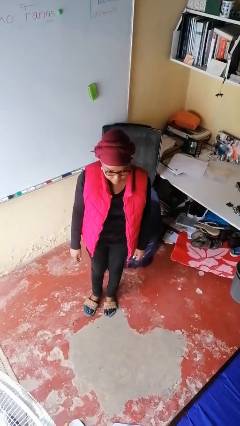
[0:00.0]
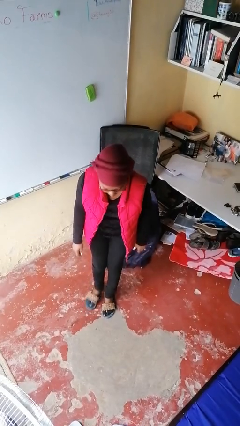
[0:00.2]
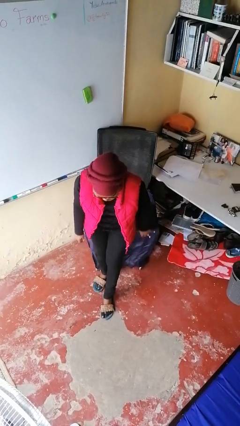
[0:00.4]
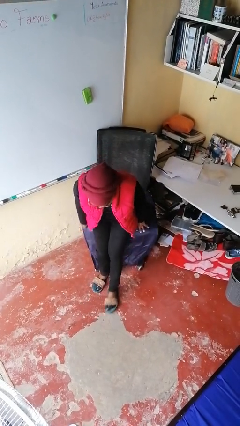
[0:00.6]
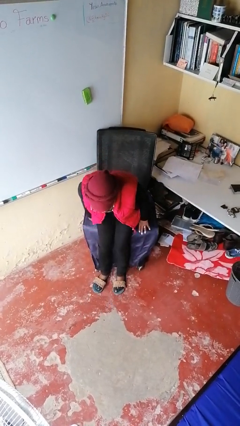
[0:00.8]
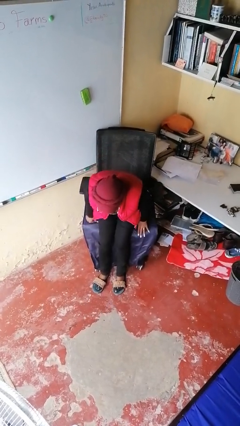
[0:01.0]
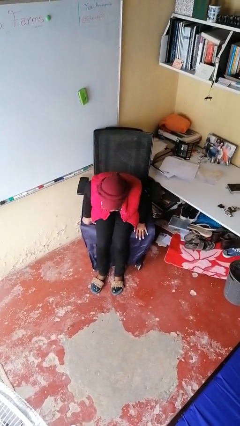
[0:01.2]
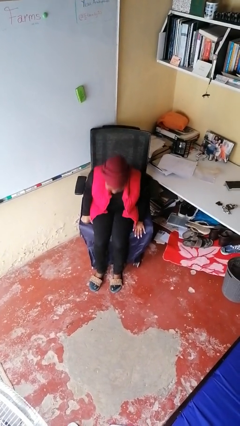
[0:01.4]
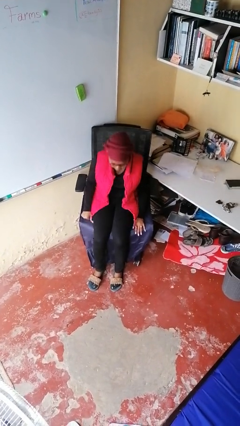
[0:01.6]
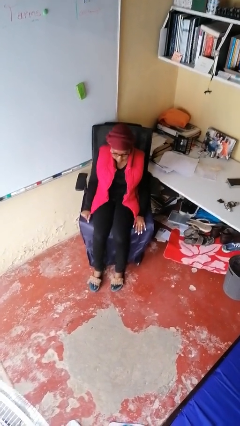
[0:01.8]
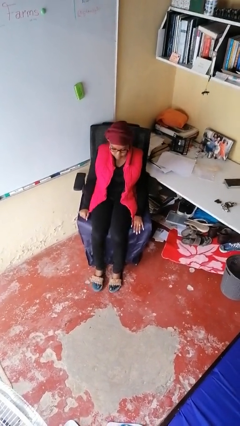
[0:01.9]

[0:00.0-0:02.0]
person sits down

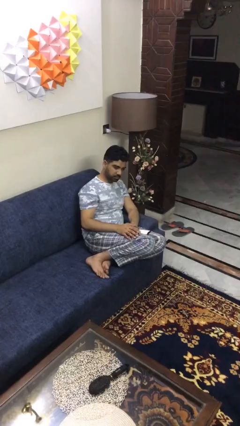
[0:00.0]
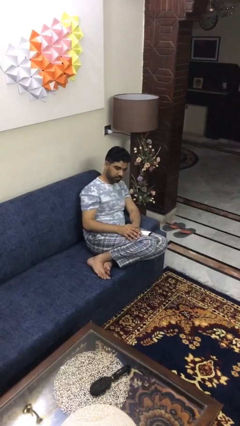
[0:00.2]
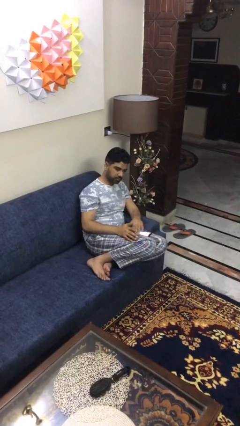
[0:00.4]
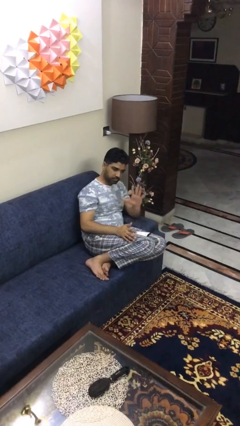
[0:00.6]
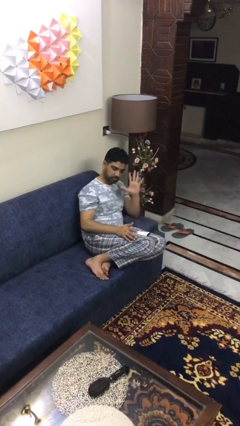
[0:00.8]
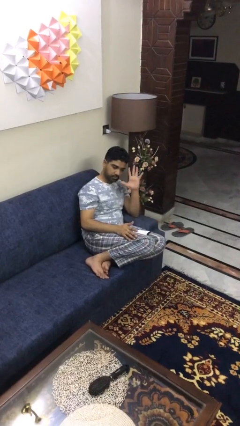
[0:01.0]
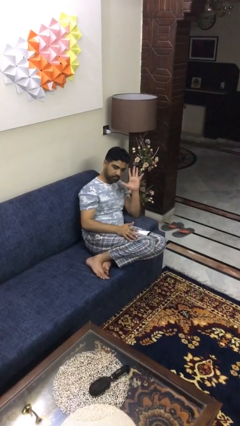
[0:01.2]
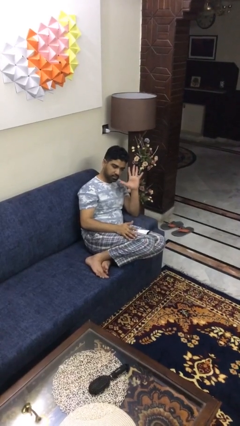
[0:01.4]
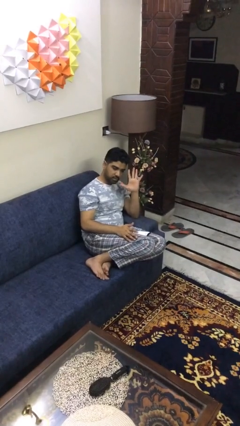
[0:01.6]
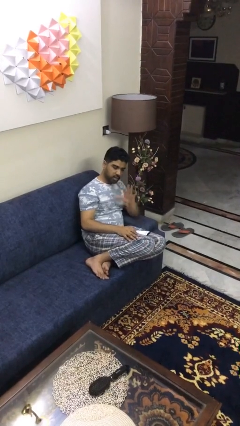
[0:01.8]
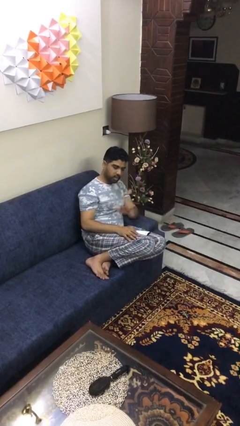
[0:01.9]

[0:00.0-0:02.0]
person gestures number five

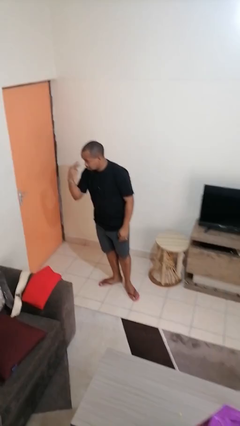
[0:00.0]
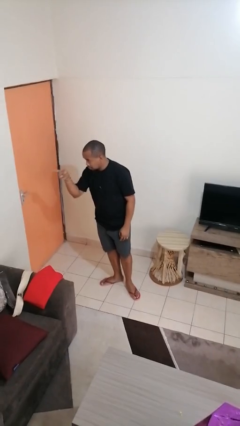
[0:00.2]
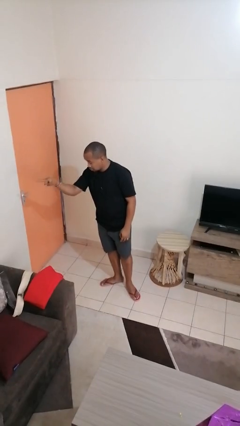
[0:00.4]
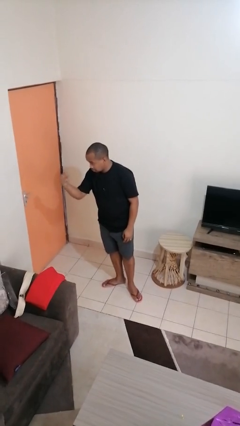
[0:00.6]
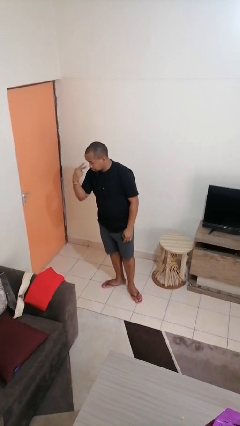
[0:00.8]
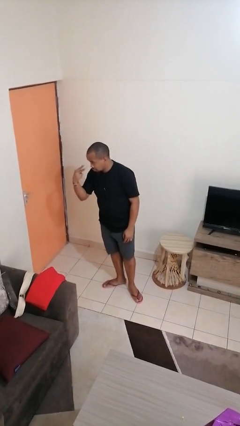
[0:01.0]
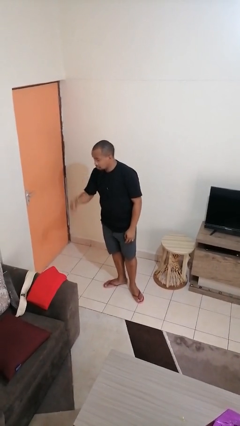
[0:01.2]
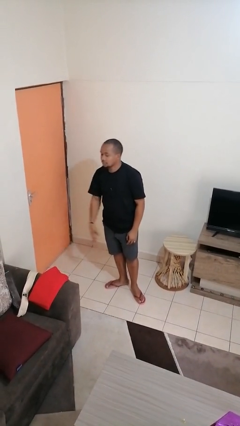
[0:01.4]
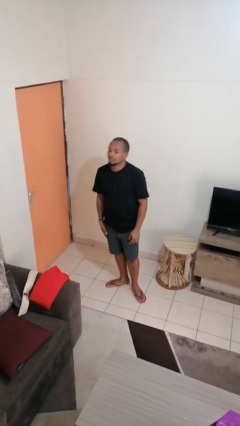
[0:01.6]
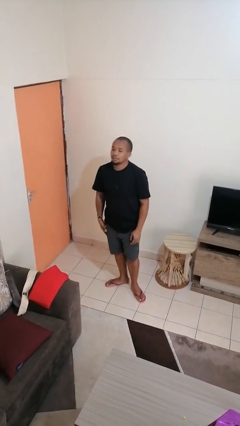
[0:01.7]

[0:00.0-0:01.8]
person gestures watch closely

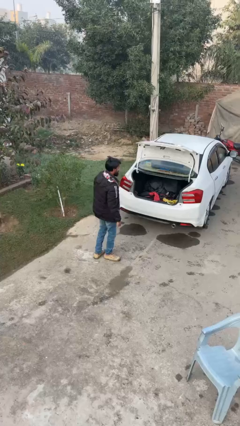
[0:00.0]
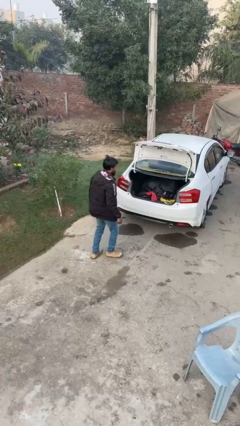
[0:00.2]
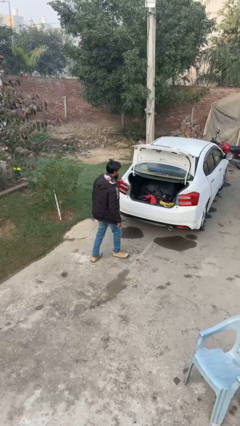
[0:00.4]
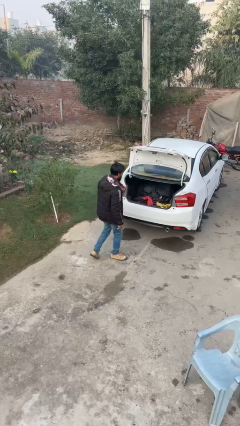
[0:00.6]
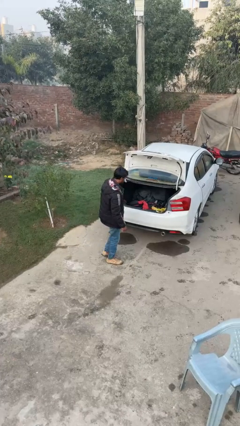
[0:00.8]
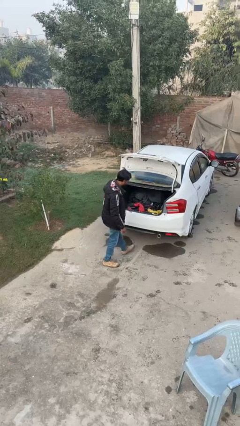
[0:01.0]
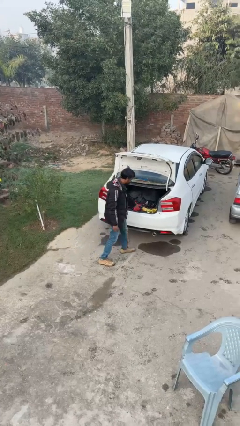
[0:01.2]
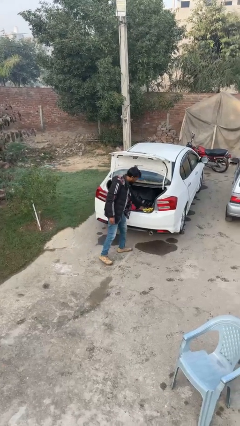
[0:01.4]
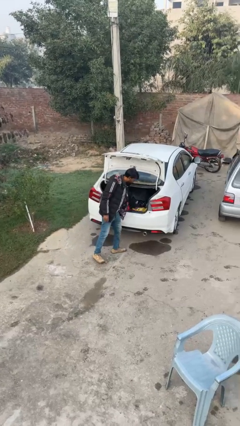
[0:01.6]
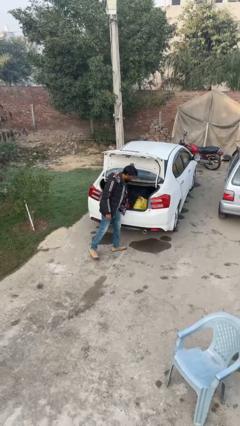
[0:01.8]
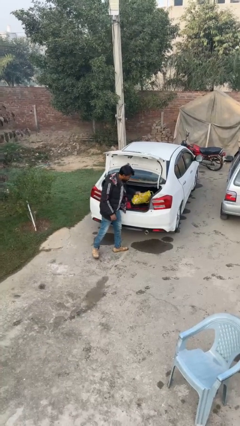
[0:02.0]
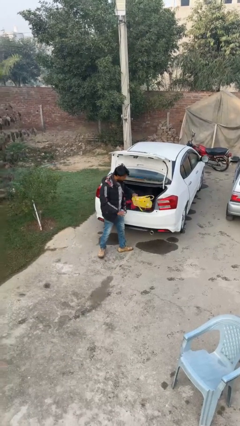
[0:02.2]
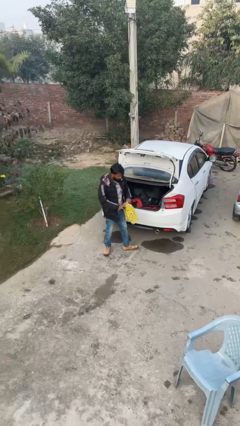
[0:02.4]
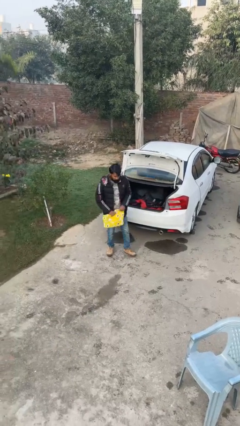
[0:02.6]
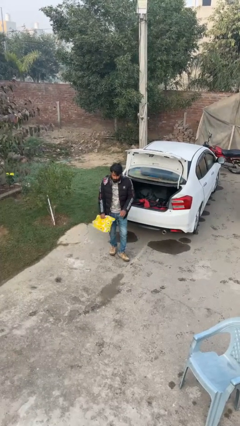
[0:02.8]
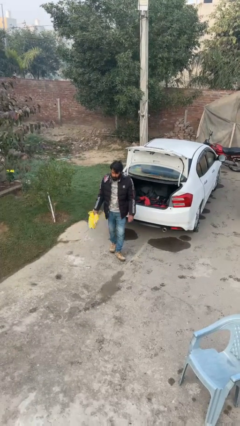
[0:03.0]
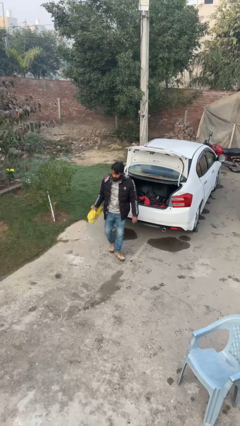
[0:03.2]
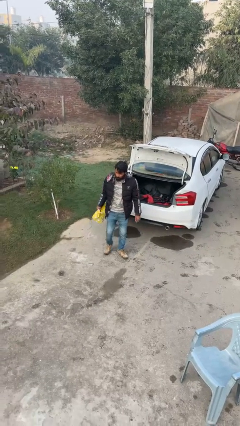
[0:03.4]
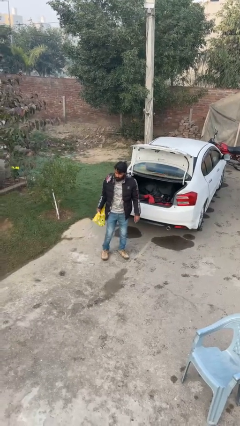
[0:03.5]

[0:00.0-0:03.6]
person unloads car

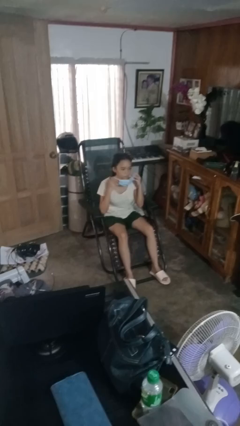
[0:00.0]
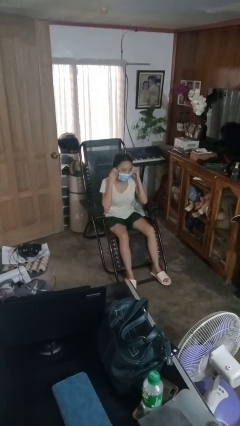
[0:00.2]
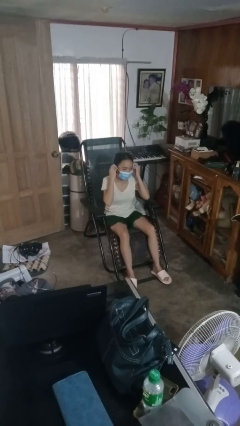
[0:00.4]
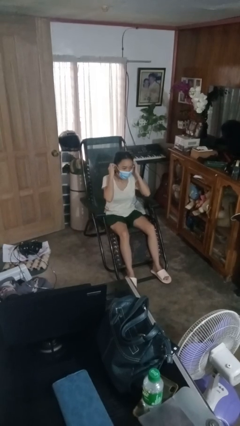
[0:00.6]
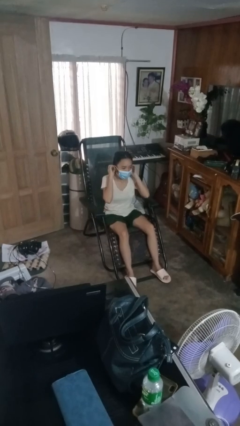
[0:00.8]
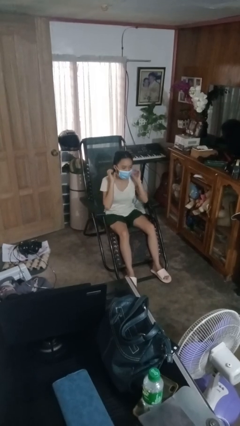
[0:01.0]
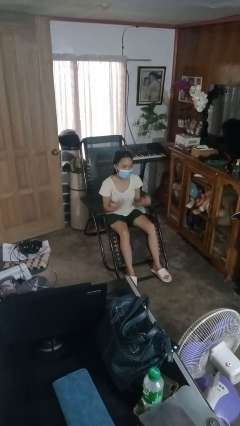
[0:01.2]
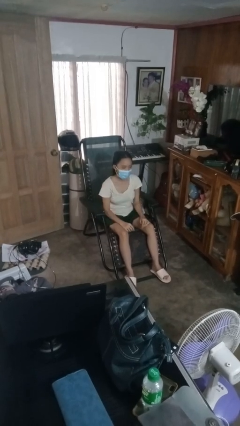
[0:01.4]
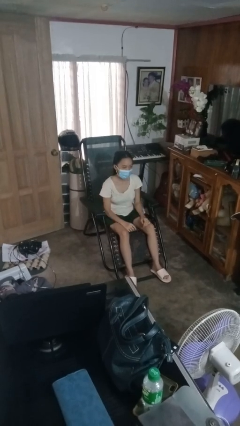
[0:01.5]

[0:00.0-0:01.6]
person puts on facemask

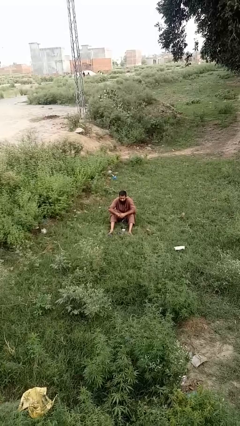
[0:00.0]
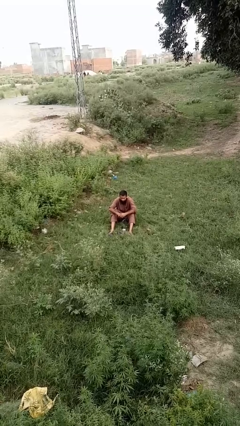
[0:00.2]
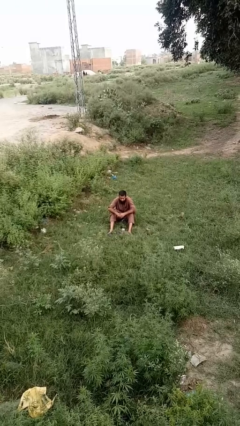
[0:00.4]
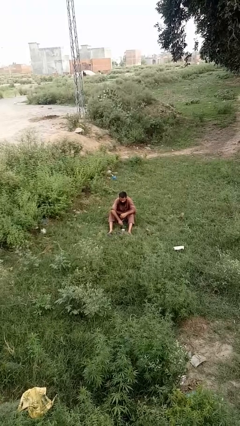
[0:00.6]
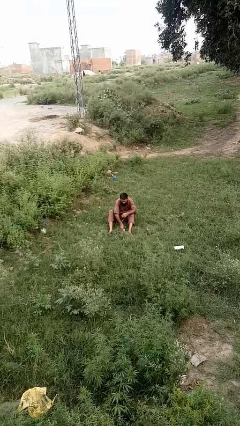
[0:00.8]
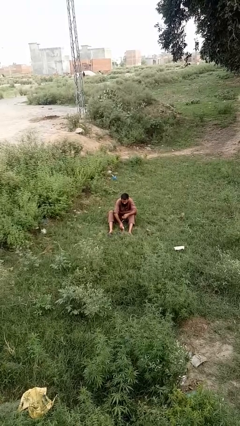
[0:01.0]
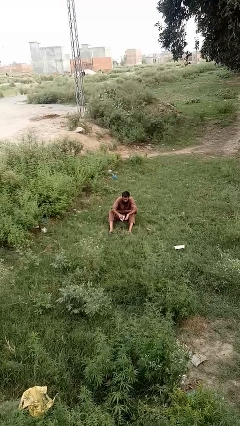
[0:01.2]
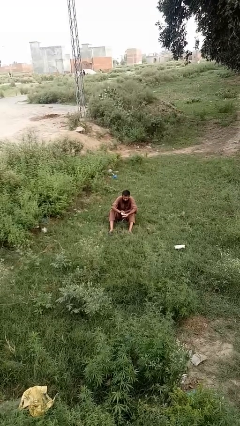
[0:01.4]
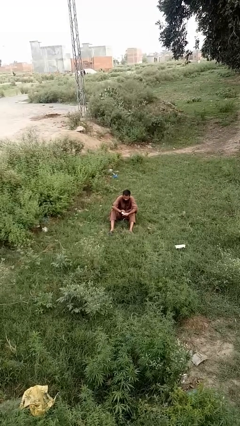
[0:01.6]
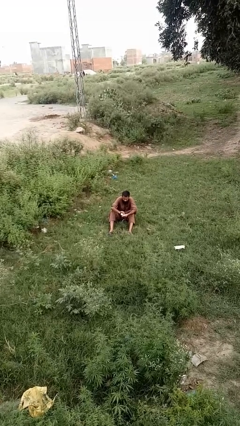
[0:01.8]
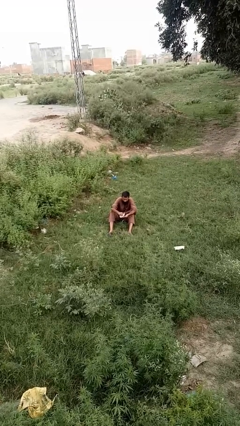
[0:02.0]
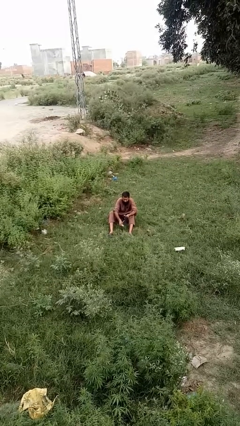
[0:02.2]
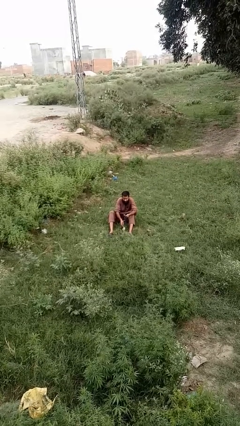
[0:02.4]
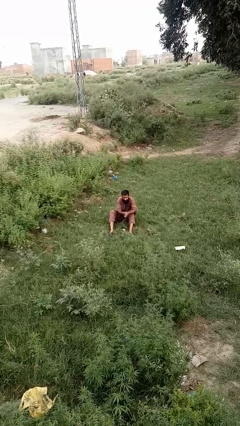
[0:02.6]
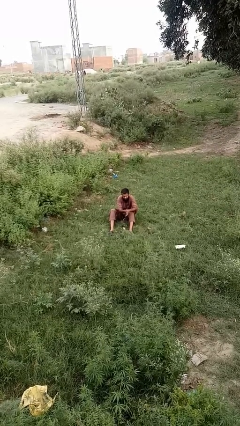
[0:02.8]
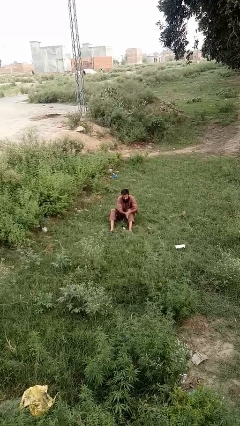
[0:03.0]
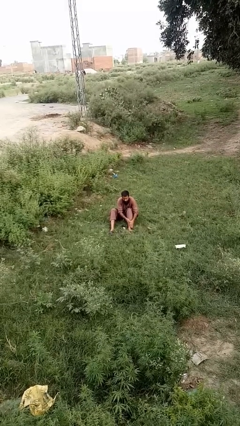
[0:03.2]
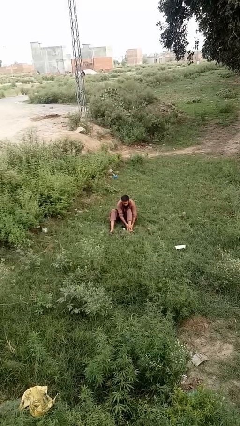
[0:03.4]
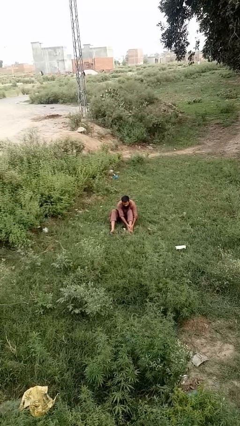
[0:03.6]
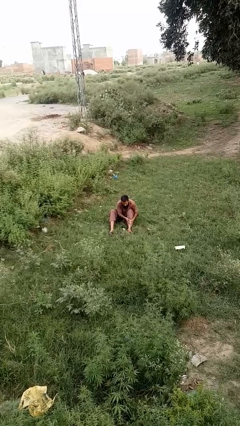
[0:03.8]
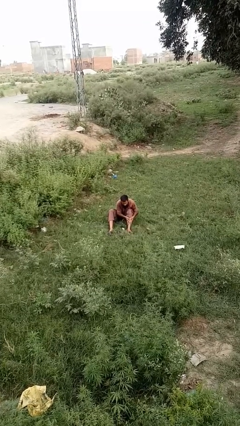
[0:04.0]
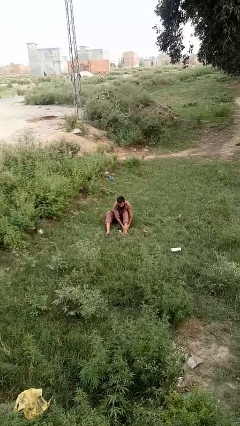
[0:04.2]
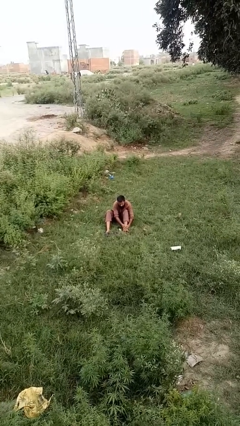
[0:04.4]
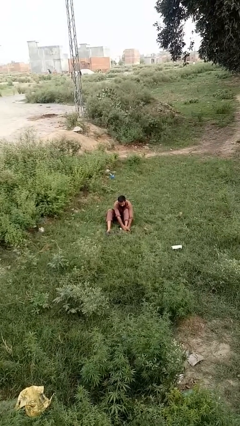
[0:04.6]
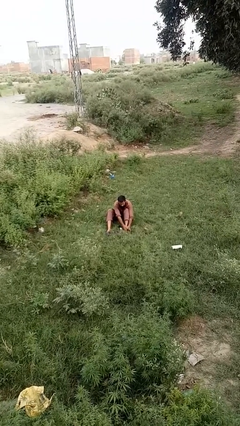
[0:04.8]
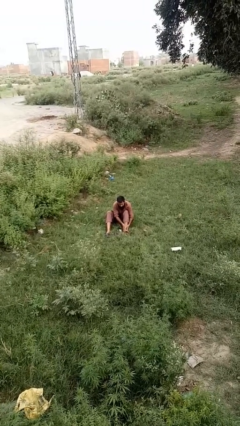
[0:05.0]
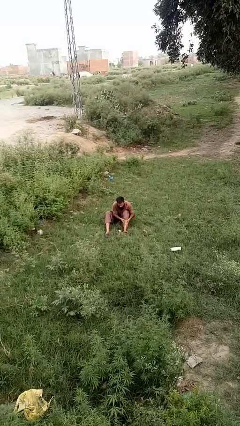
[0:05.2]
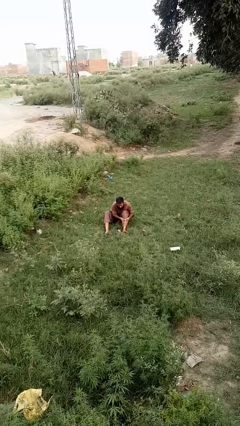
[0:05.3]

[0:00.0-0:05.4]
person applies sunscreen

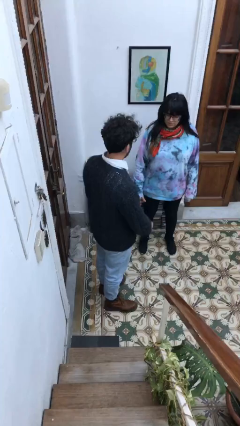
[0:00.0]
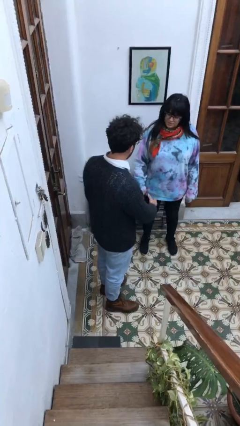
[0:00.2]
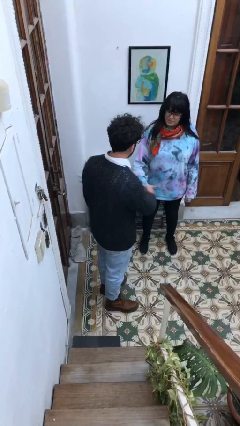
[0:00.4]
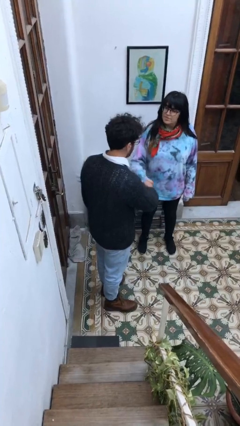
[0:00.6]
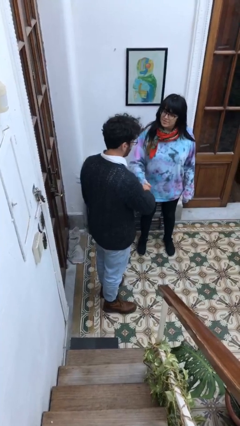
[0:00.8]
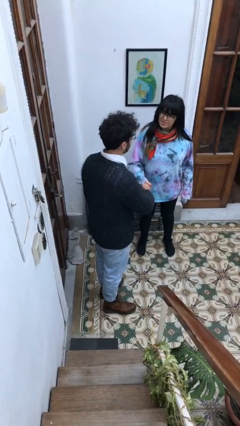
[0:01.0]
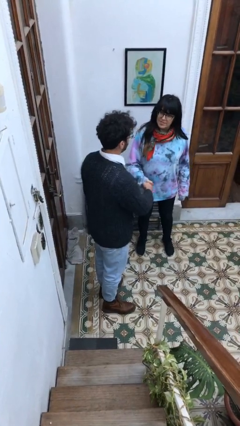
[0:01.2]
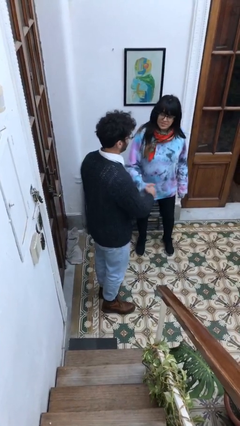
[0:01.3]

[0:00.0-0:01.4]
person shakes hand
